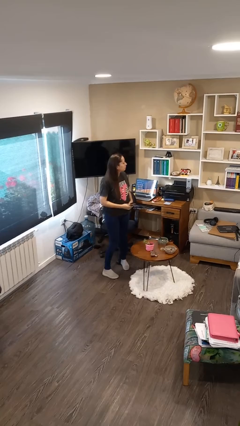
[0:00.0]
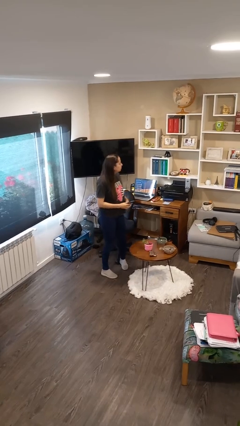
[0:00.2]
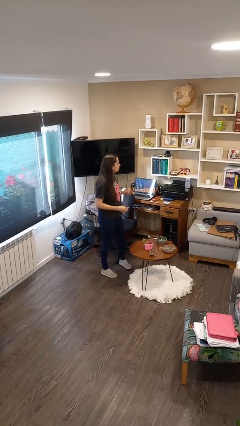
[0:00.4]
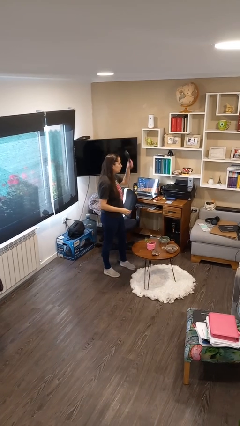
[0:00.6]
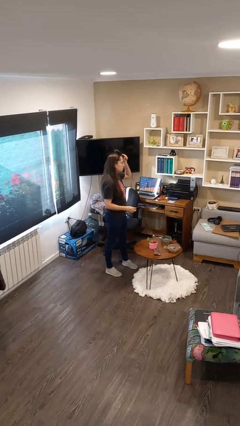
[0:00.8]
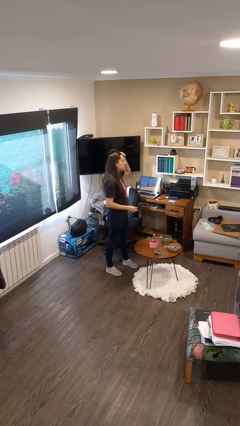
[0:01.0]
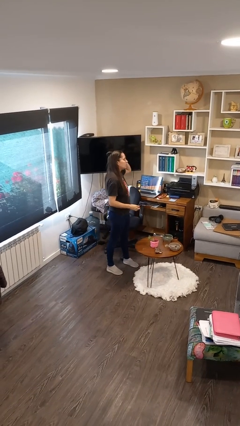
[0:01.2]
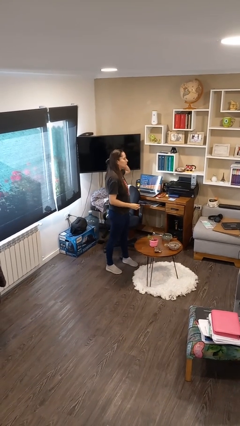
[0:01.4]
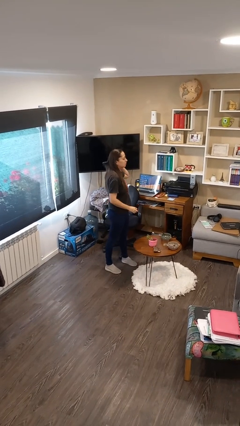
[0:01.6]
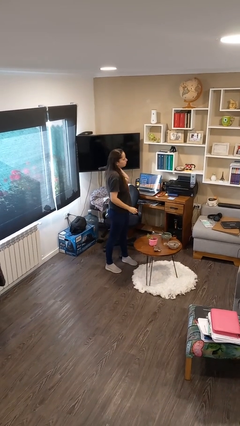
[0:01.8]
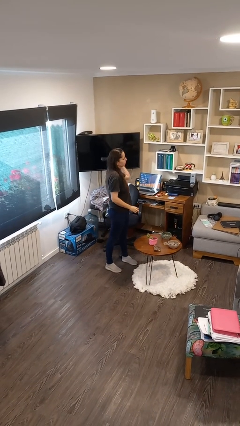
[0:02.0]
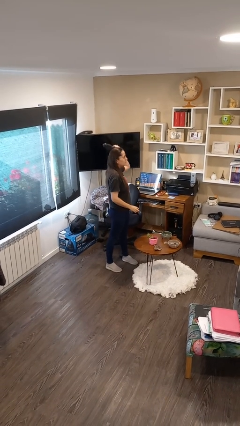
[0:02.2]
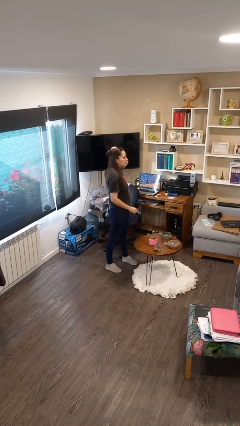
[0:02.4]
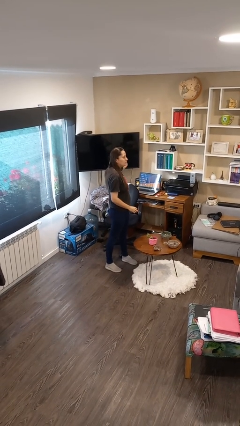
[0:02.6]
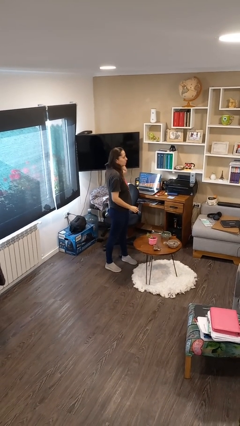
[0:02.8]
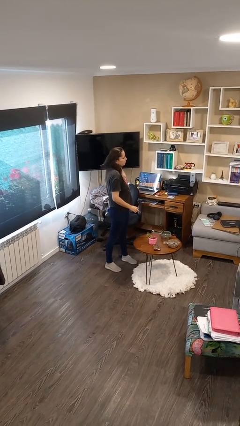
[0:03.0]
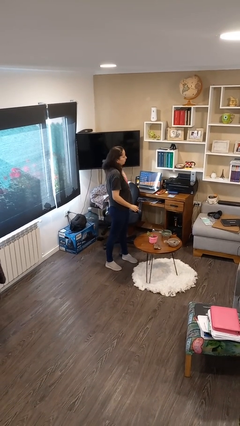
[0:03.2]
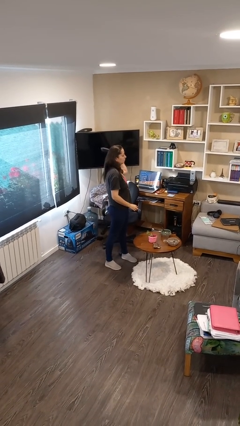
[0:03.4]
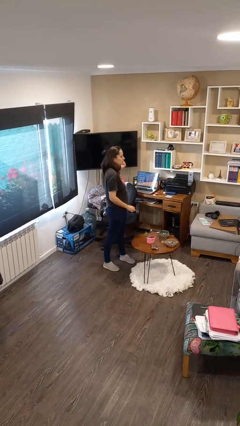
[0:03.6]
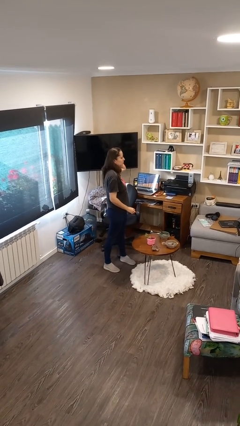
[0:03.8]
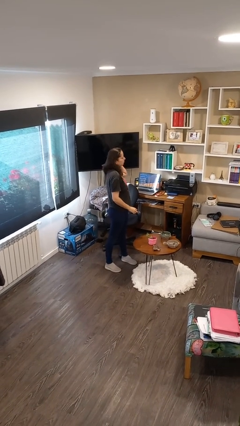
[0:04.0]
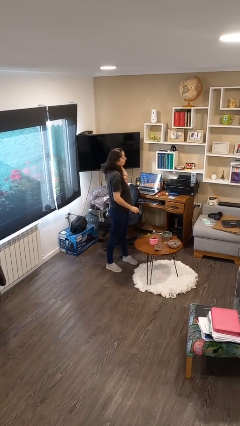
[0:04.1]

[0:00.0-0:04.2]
person brushes hair

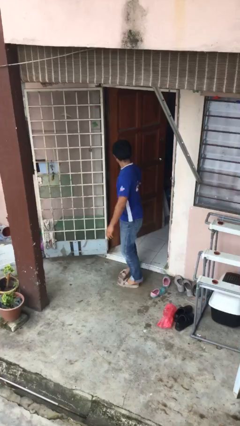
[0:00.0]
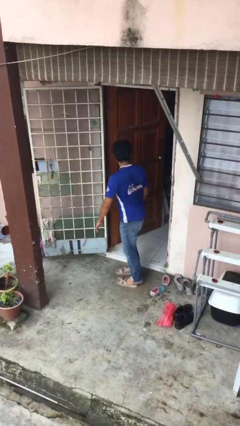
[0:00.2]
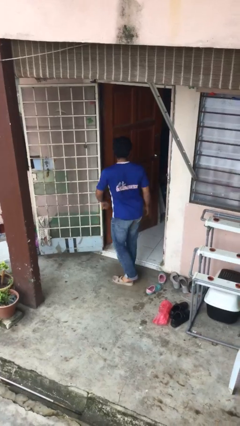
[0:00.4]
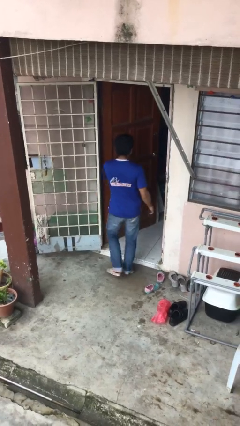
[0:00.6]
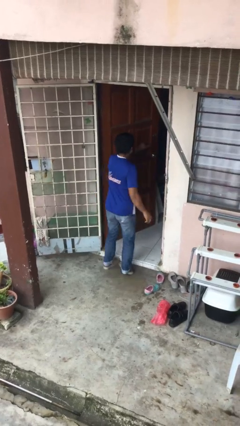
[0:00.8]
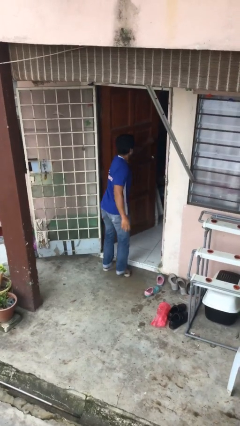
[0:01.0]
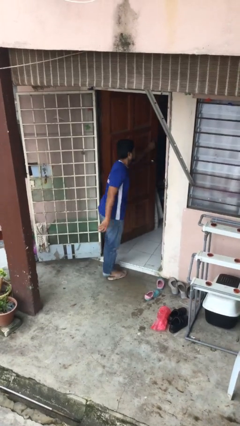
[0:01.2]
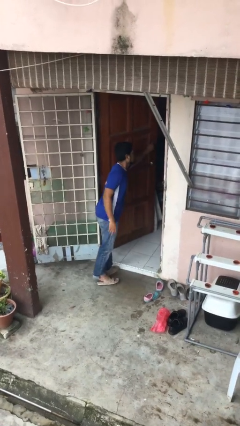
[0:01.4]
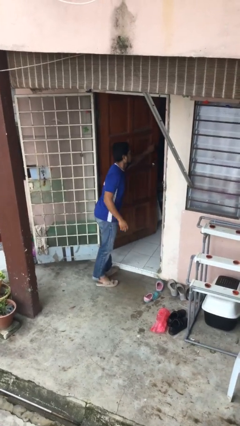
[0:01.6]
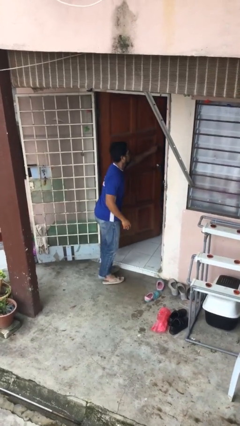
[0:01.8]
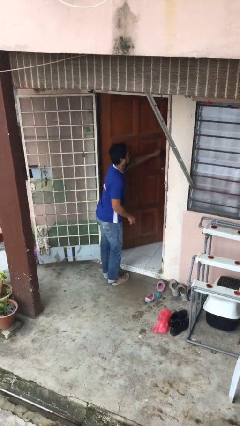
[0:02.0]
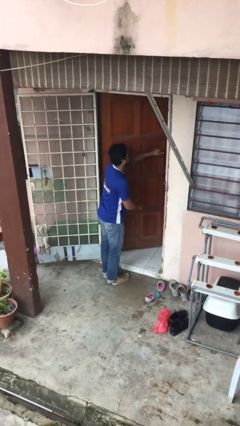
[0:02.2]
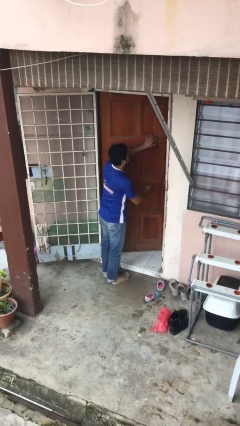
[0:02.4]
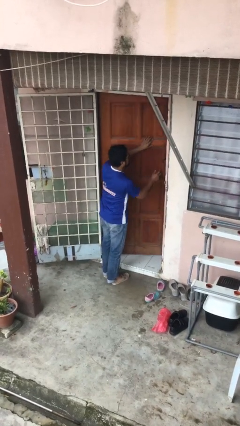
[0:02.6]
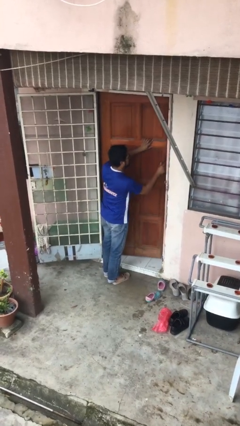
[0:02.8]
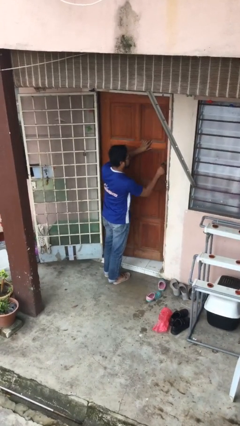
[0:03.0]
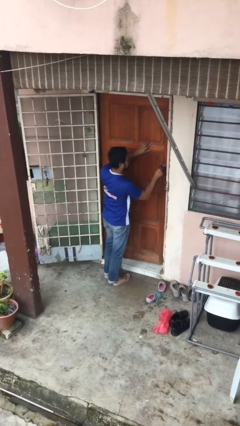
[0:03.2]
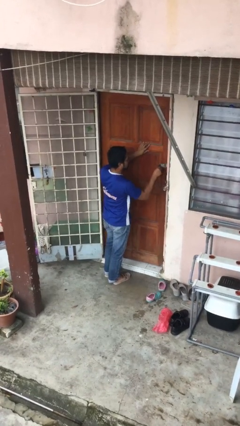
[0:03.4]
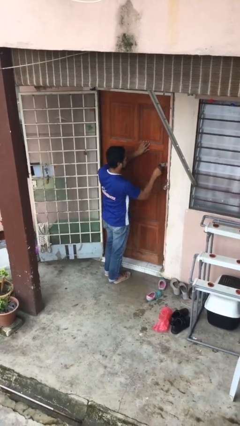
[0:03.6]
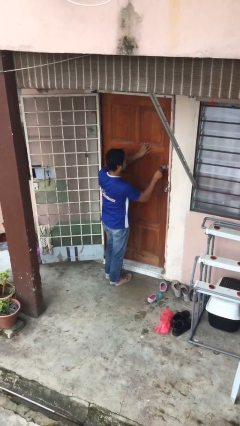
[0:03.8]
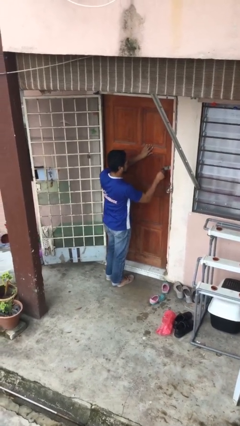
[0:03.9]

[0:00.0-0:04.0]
person closes facility door

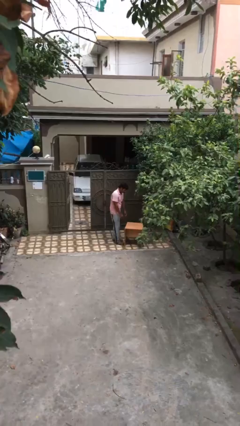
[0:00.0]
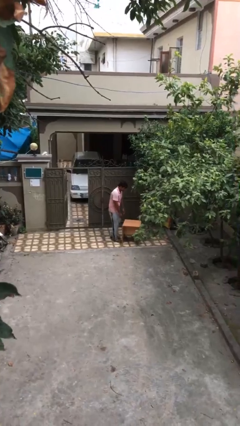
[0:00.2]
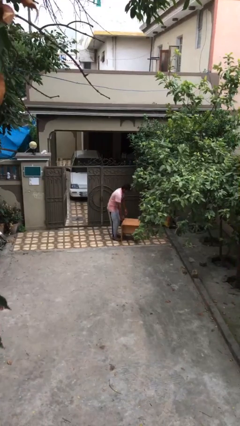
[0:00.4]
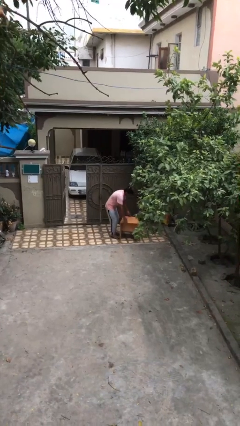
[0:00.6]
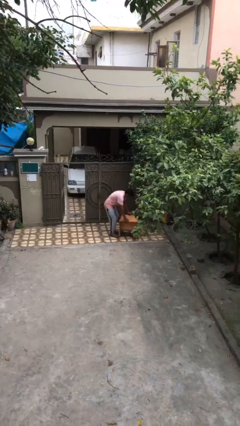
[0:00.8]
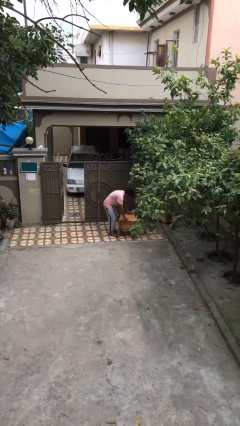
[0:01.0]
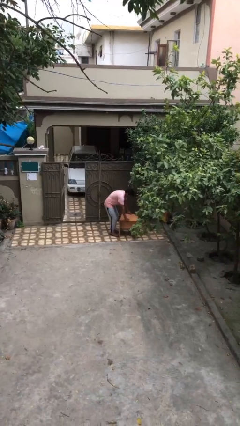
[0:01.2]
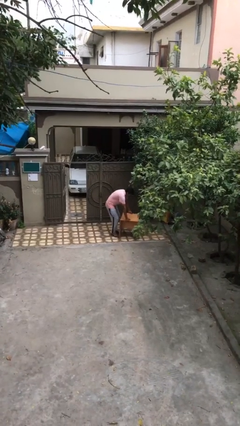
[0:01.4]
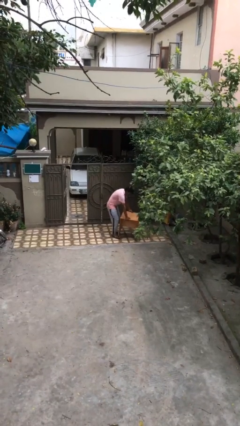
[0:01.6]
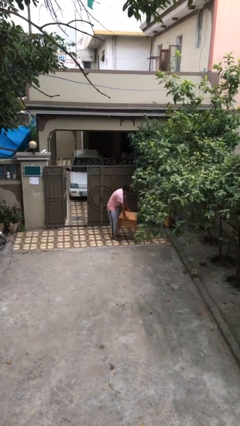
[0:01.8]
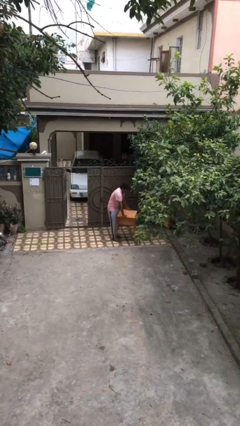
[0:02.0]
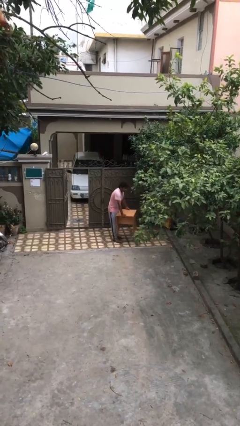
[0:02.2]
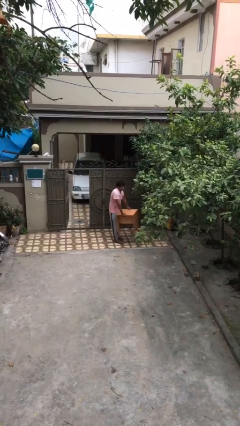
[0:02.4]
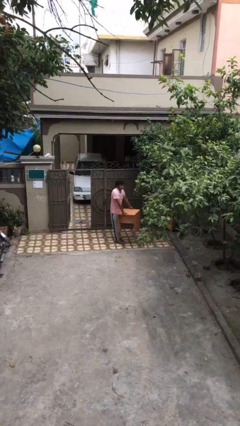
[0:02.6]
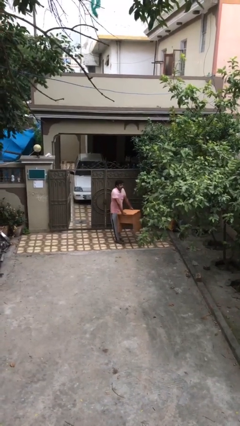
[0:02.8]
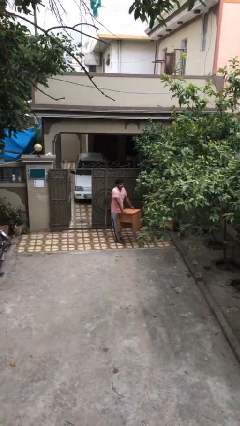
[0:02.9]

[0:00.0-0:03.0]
person picks up object from floor

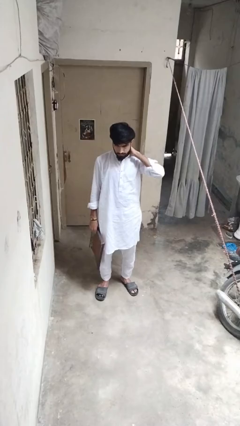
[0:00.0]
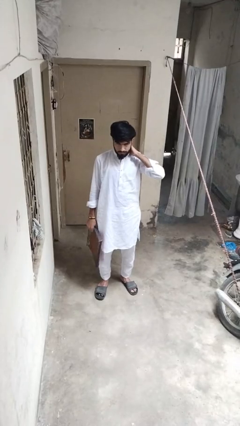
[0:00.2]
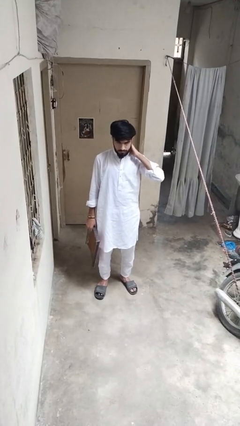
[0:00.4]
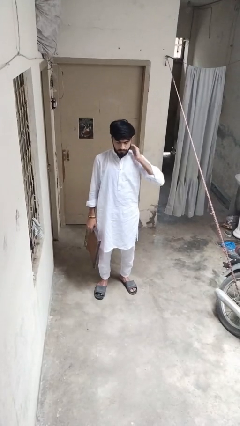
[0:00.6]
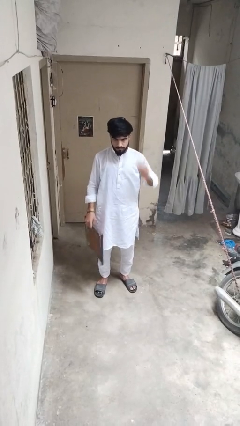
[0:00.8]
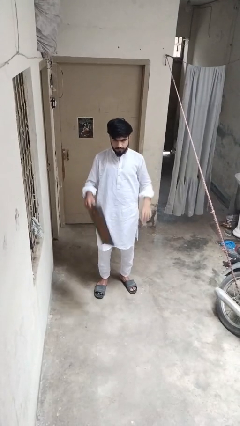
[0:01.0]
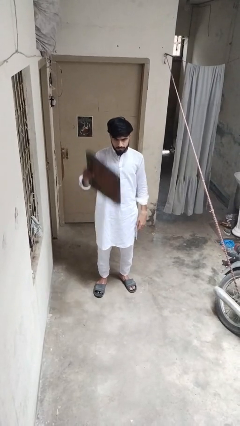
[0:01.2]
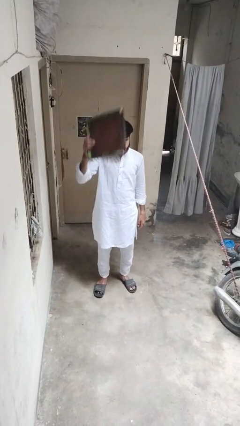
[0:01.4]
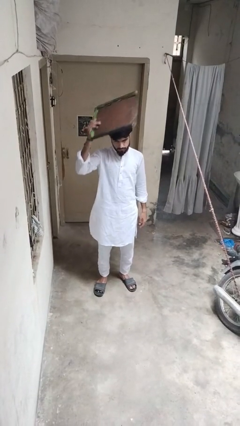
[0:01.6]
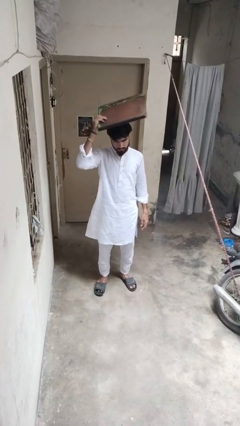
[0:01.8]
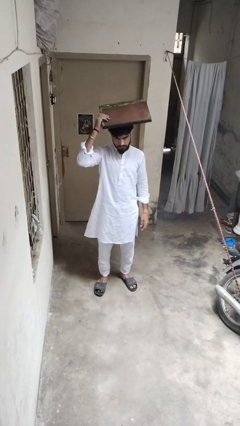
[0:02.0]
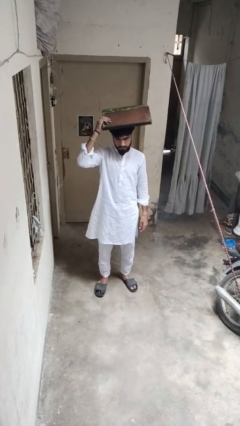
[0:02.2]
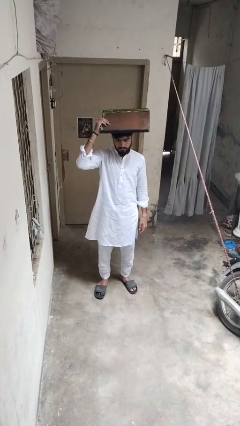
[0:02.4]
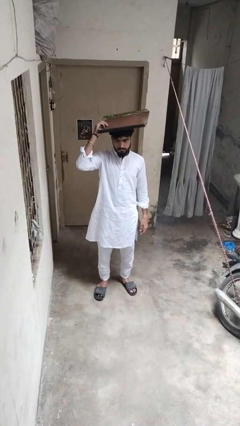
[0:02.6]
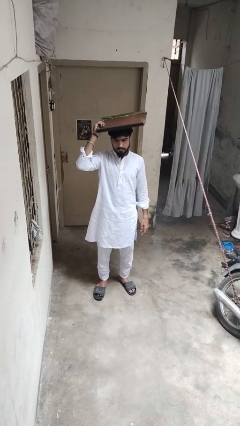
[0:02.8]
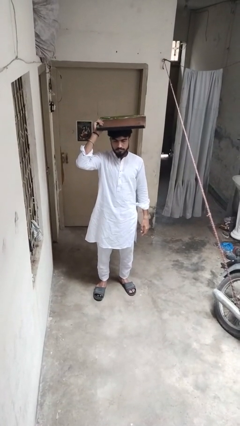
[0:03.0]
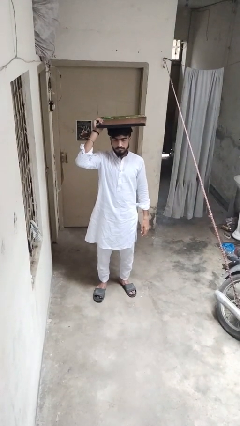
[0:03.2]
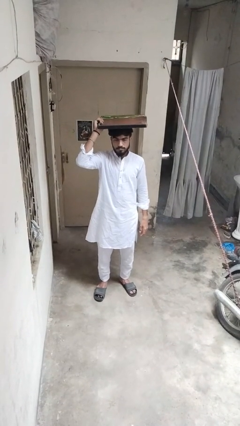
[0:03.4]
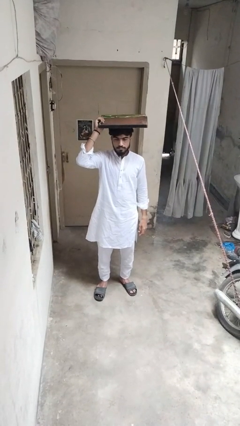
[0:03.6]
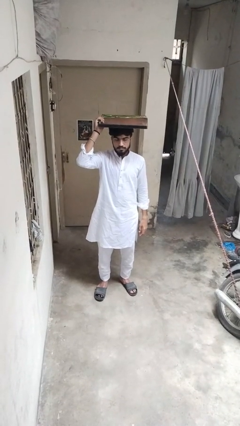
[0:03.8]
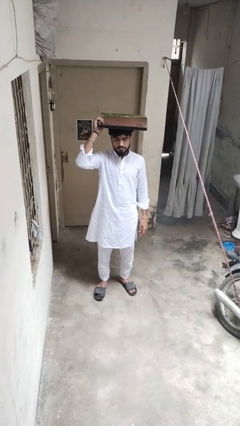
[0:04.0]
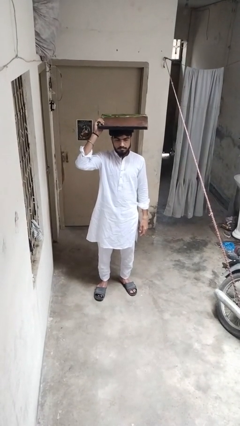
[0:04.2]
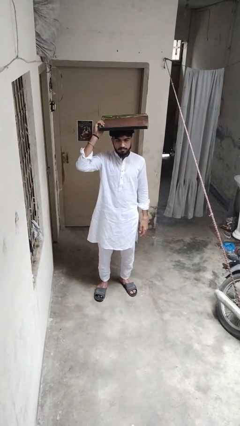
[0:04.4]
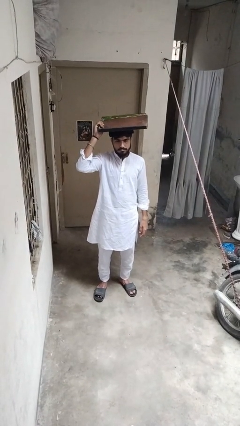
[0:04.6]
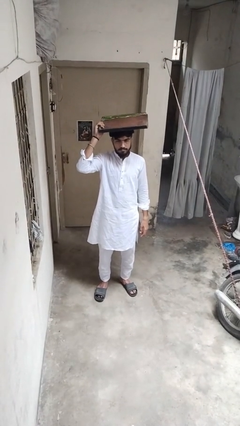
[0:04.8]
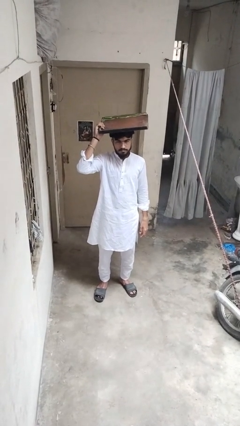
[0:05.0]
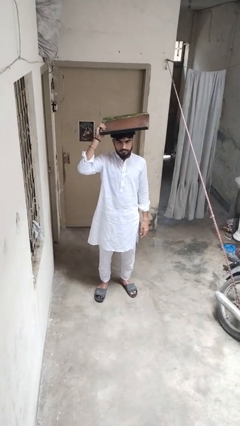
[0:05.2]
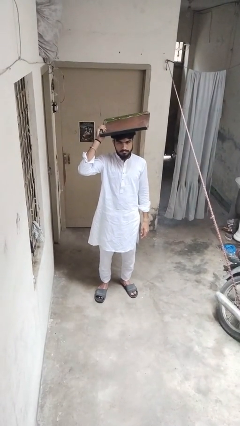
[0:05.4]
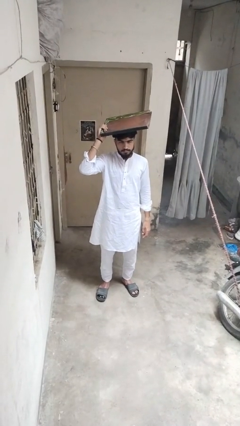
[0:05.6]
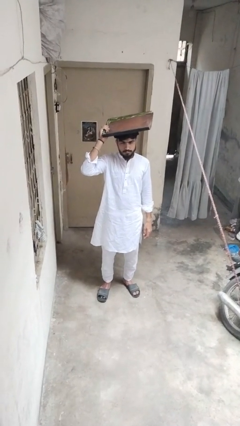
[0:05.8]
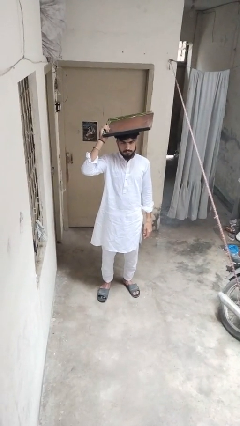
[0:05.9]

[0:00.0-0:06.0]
person holds object above head

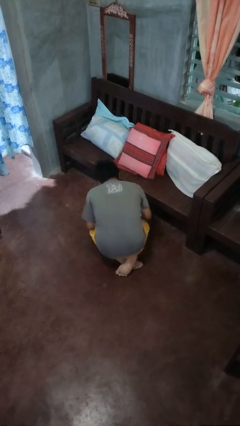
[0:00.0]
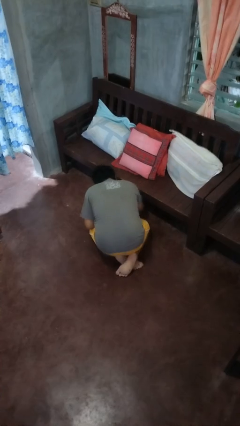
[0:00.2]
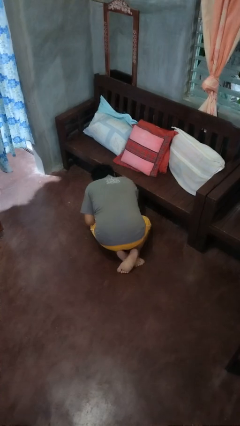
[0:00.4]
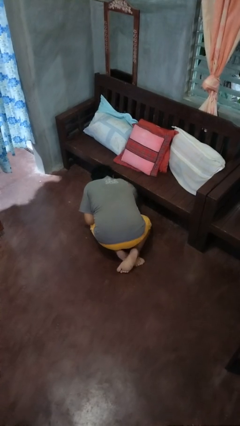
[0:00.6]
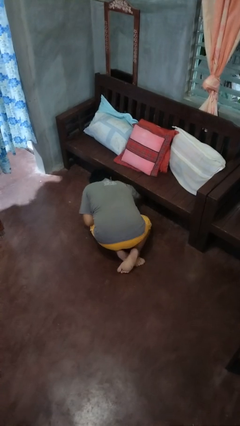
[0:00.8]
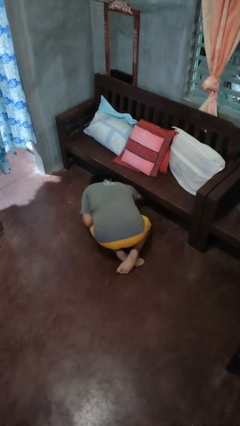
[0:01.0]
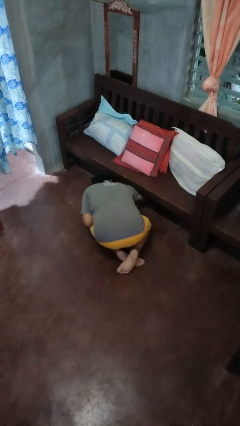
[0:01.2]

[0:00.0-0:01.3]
person searches under couch
